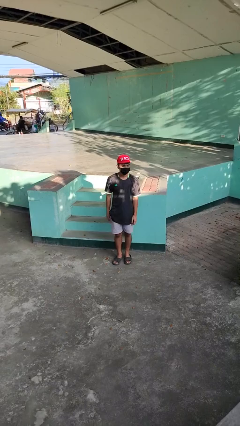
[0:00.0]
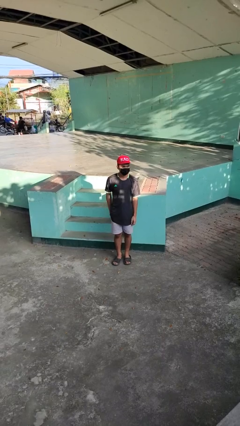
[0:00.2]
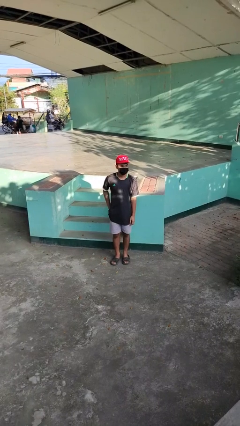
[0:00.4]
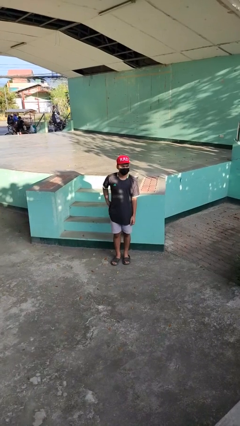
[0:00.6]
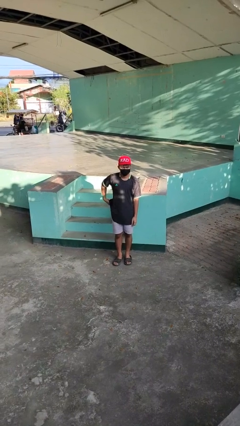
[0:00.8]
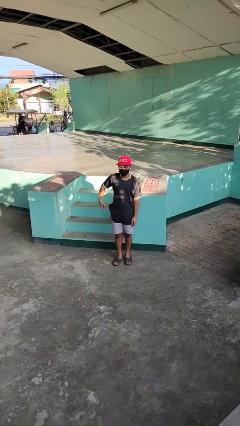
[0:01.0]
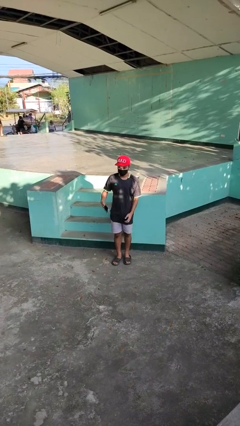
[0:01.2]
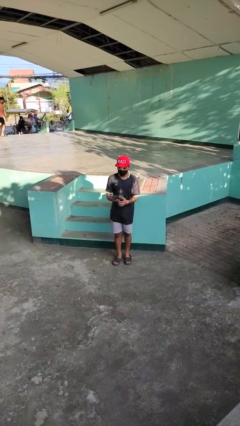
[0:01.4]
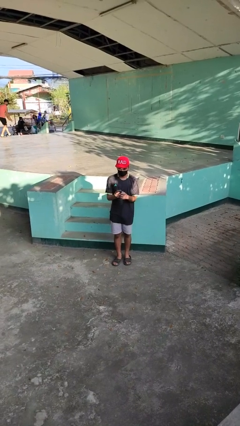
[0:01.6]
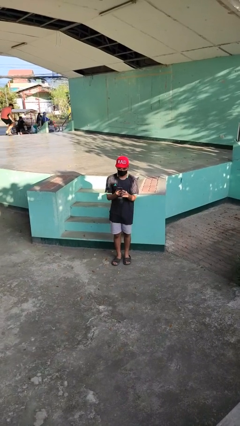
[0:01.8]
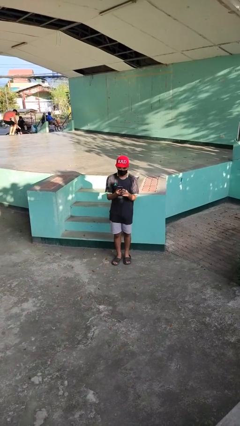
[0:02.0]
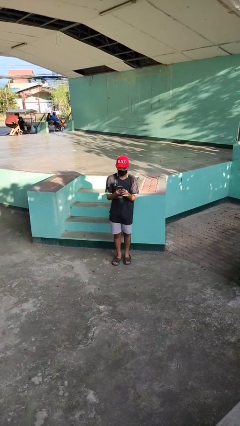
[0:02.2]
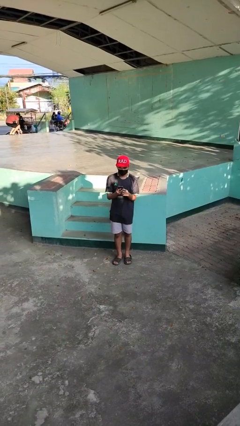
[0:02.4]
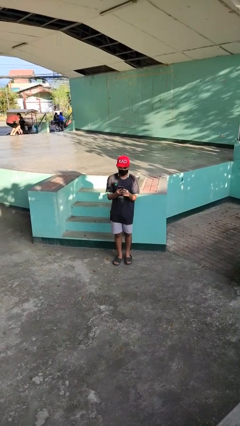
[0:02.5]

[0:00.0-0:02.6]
person takes phone from pocket

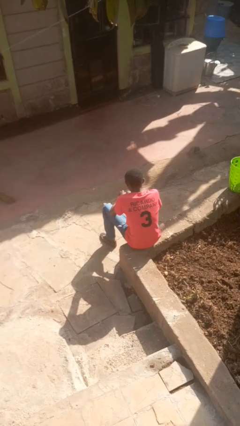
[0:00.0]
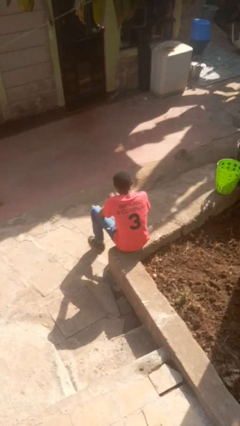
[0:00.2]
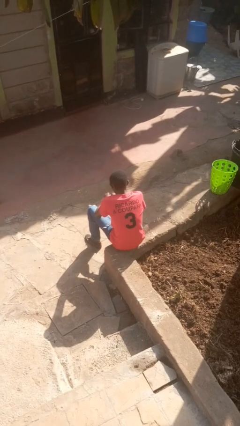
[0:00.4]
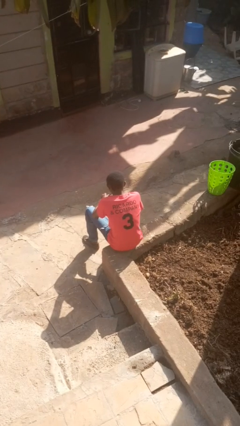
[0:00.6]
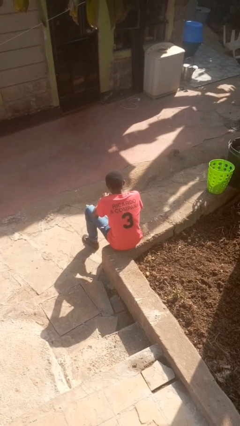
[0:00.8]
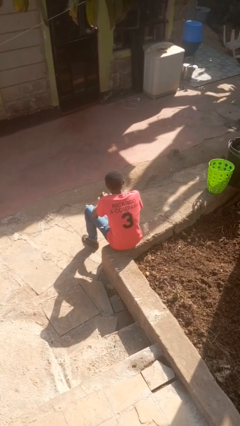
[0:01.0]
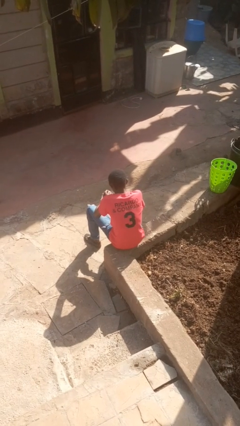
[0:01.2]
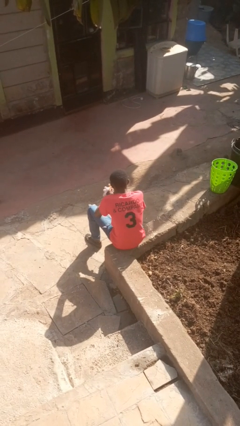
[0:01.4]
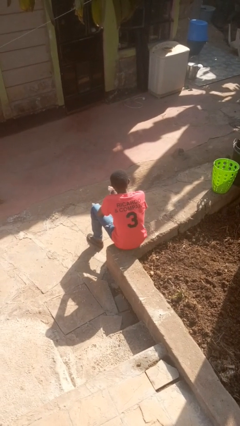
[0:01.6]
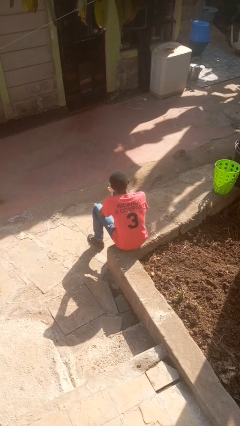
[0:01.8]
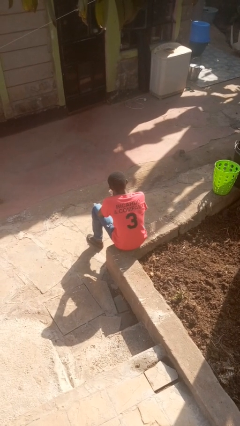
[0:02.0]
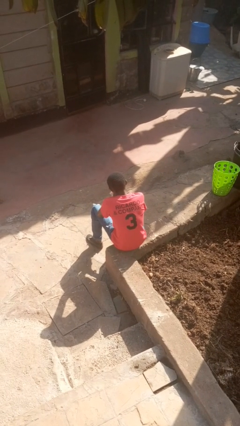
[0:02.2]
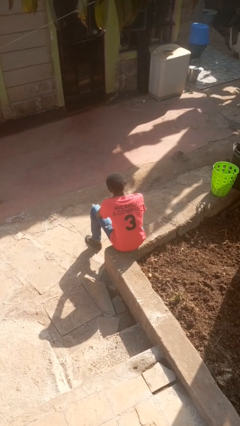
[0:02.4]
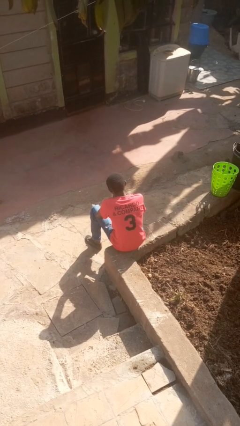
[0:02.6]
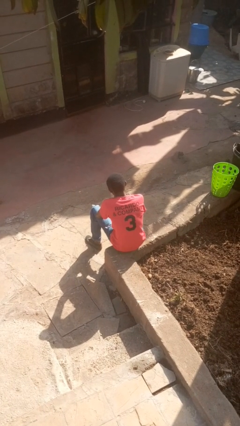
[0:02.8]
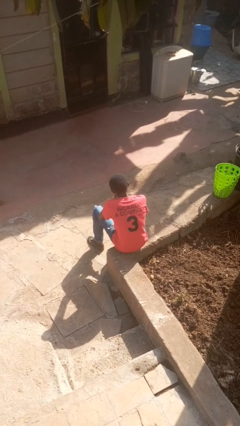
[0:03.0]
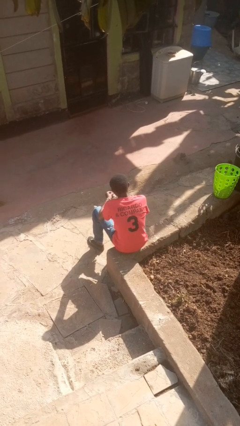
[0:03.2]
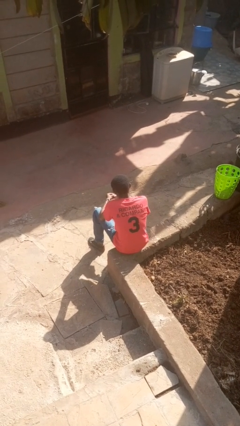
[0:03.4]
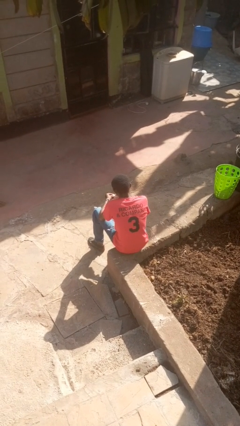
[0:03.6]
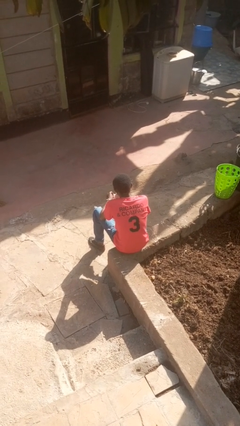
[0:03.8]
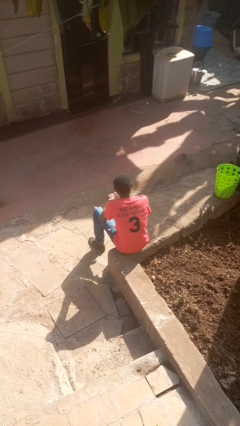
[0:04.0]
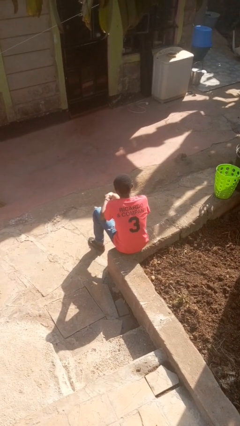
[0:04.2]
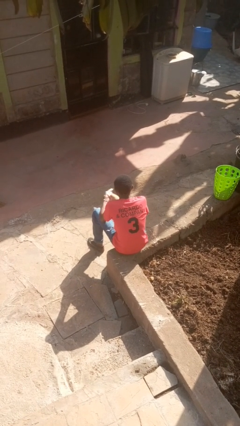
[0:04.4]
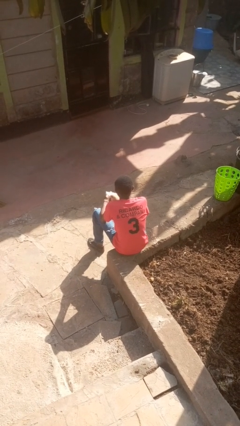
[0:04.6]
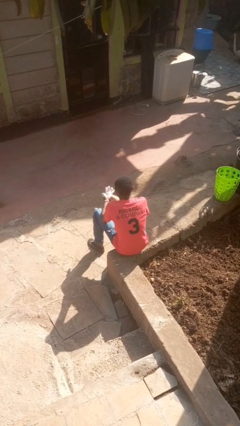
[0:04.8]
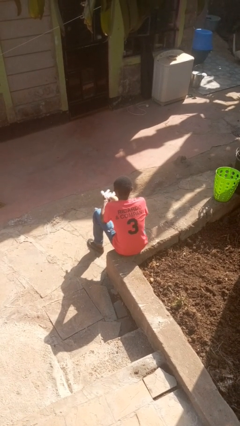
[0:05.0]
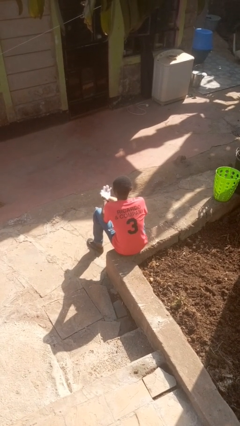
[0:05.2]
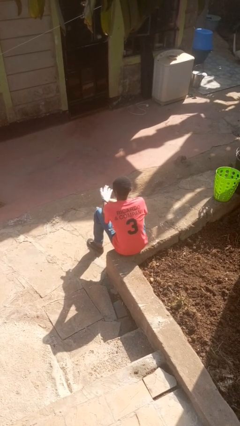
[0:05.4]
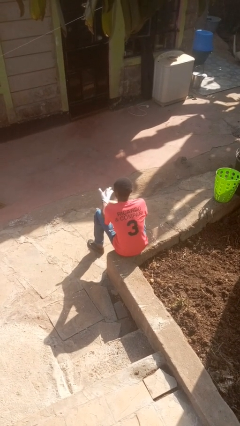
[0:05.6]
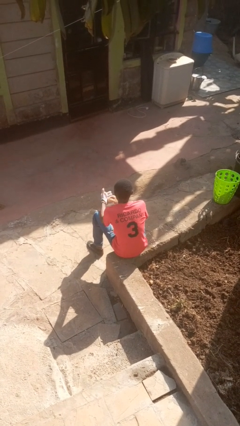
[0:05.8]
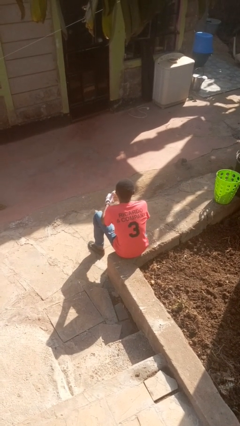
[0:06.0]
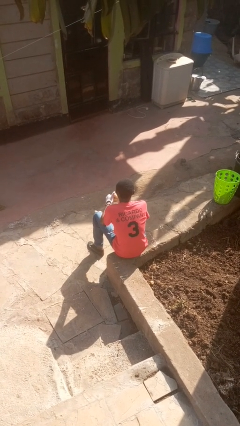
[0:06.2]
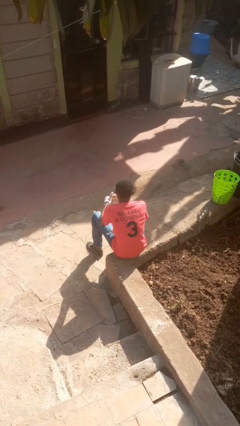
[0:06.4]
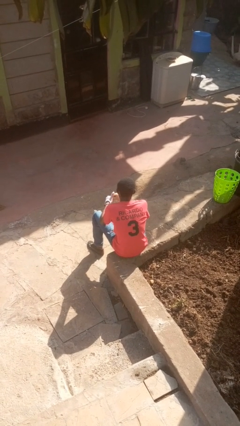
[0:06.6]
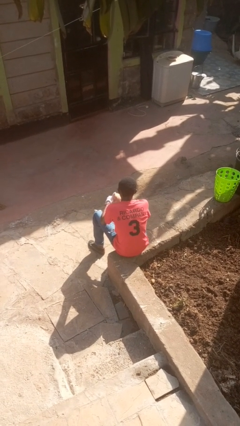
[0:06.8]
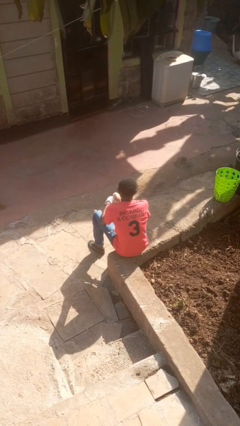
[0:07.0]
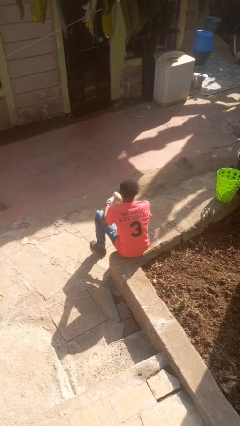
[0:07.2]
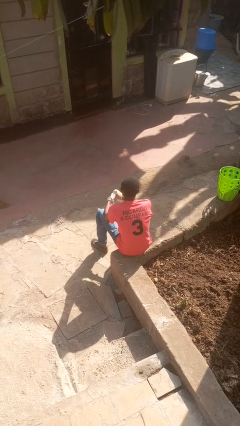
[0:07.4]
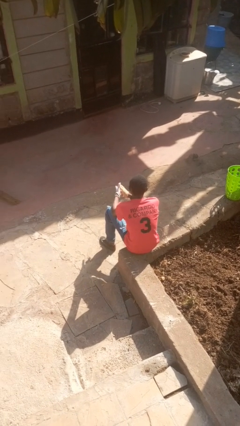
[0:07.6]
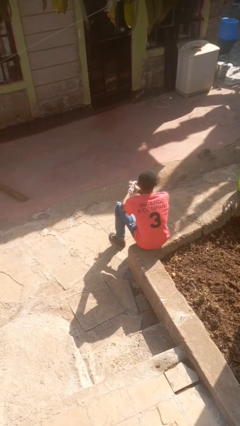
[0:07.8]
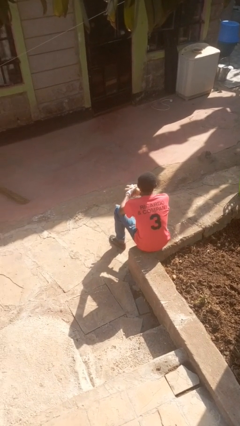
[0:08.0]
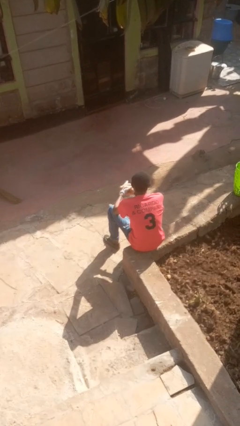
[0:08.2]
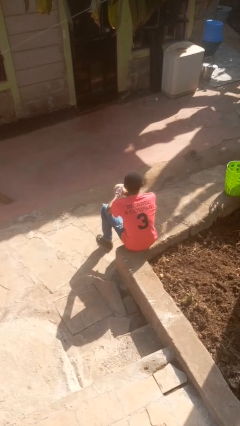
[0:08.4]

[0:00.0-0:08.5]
person puts on gloves

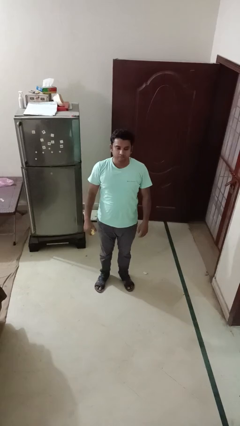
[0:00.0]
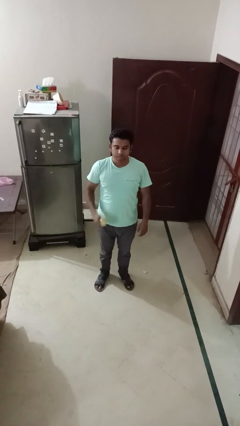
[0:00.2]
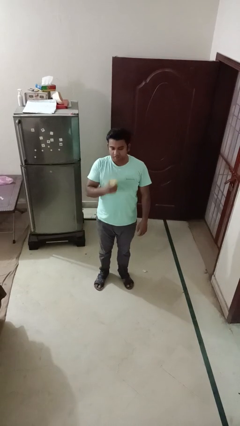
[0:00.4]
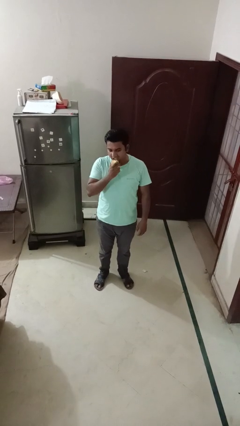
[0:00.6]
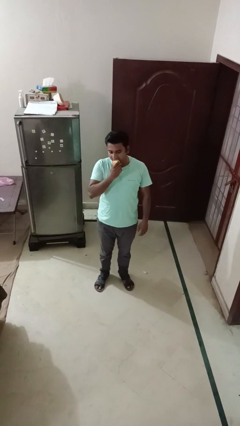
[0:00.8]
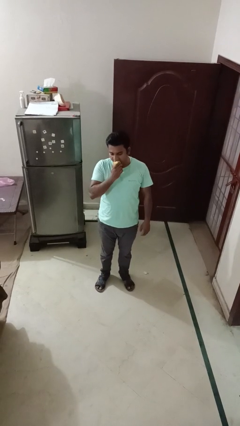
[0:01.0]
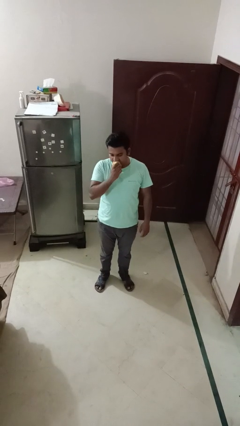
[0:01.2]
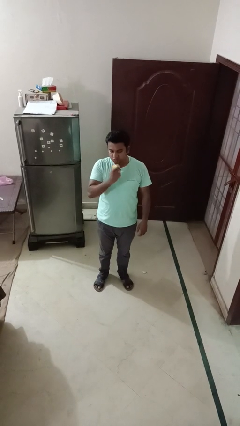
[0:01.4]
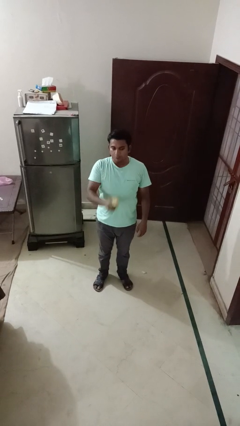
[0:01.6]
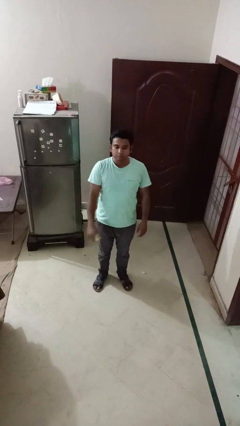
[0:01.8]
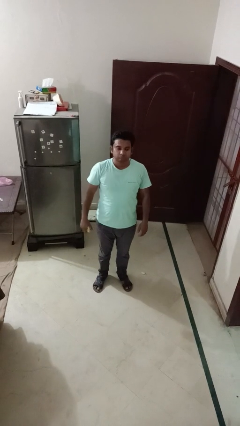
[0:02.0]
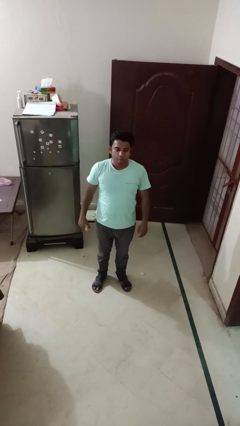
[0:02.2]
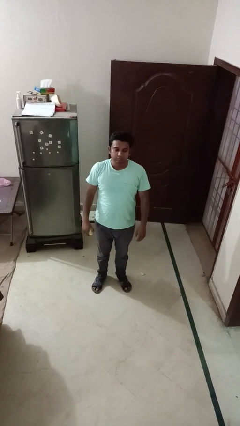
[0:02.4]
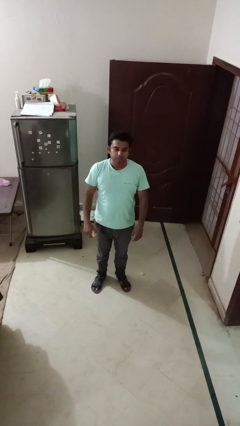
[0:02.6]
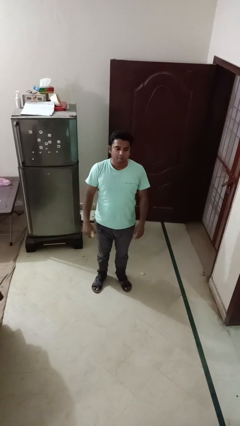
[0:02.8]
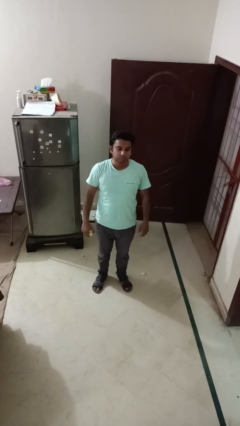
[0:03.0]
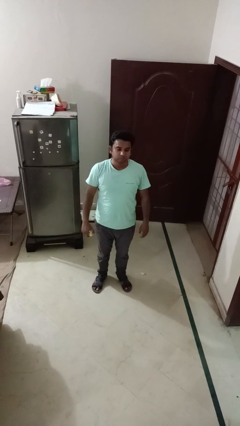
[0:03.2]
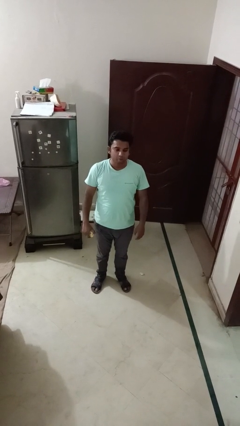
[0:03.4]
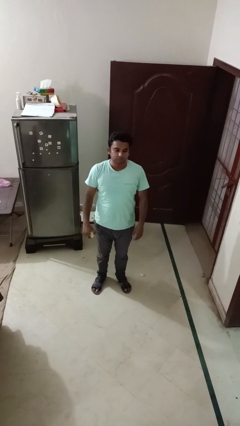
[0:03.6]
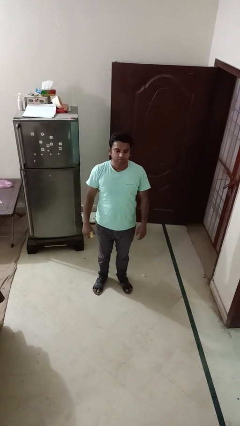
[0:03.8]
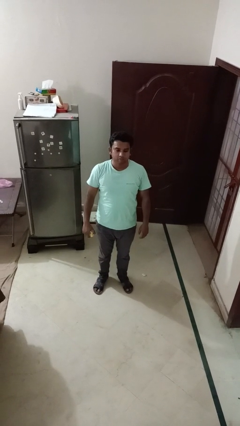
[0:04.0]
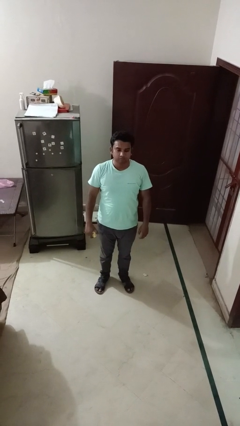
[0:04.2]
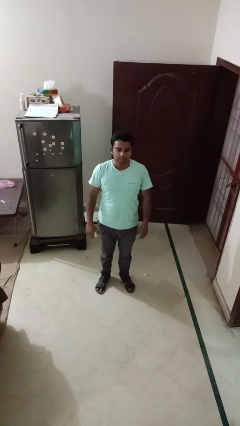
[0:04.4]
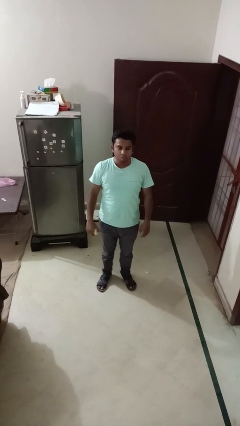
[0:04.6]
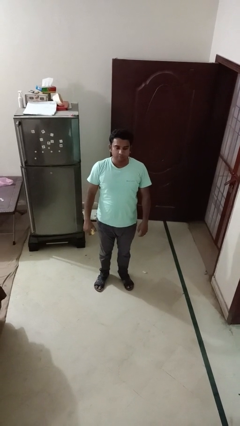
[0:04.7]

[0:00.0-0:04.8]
person eats apple

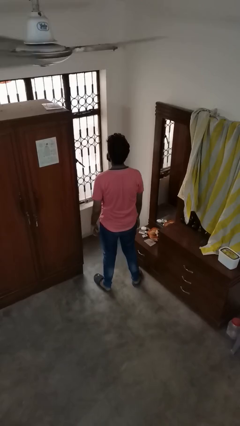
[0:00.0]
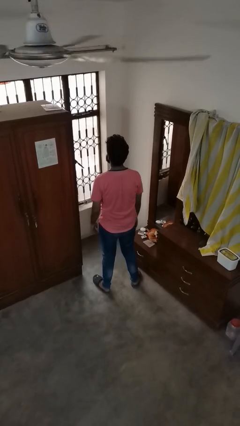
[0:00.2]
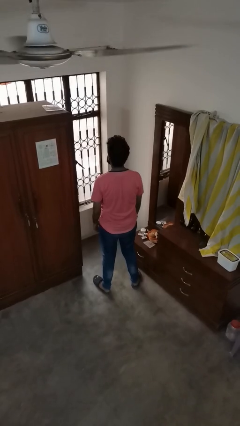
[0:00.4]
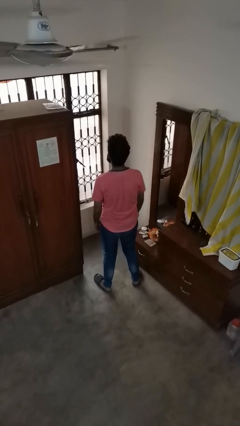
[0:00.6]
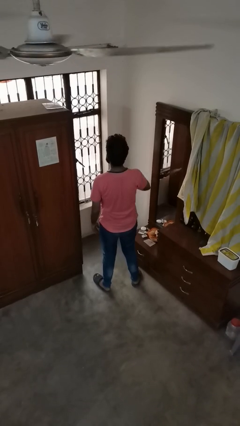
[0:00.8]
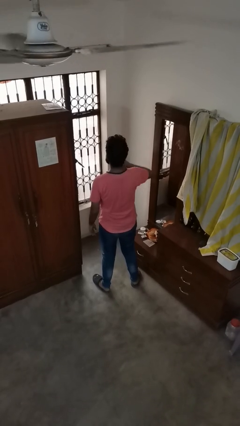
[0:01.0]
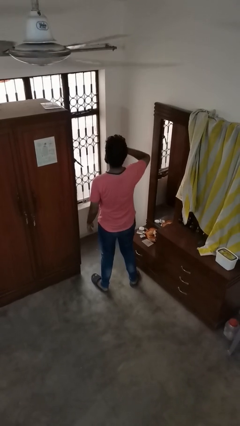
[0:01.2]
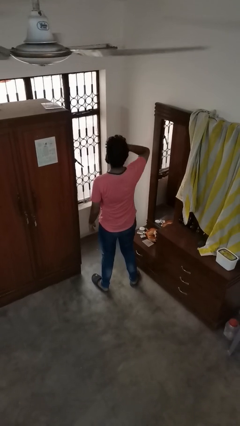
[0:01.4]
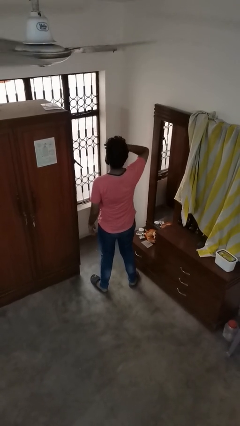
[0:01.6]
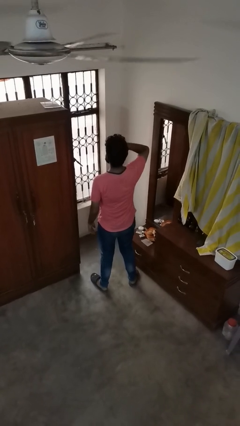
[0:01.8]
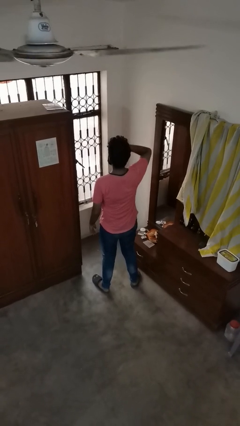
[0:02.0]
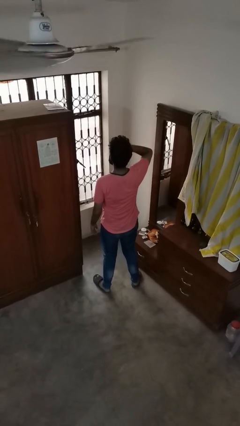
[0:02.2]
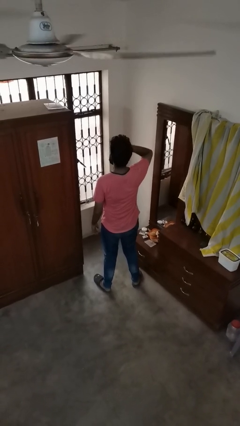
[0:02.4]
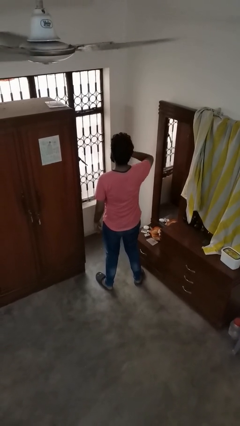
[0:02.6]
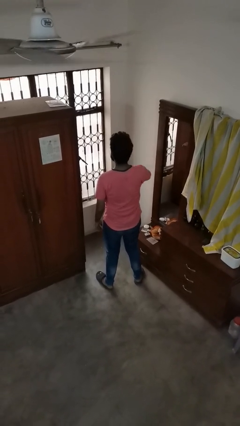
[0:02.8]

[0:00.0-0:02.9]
person yawns
